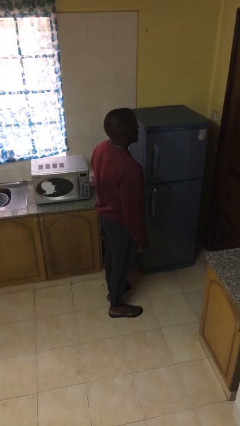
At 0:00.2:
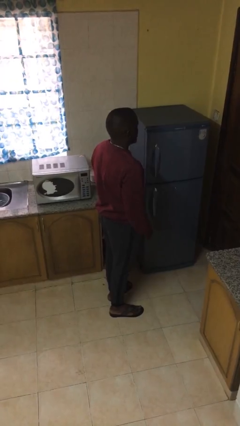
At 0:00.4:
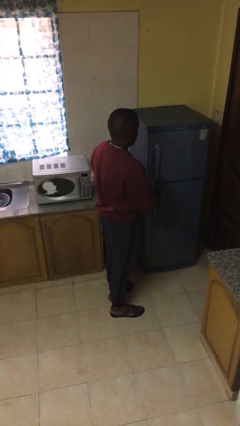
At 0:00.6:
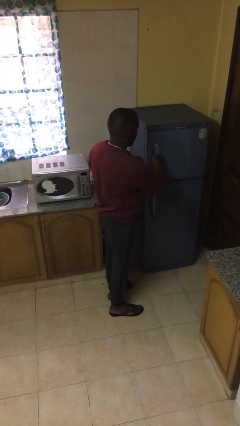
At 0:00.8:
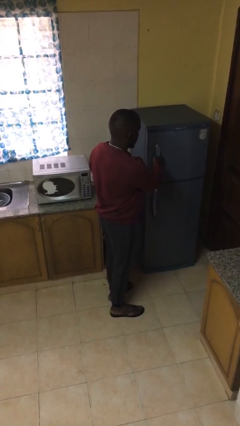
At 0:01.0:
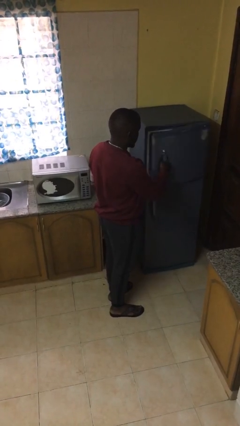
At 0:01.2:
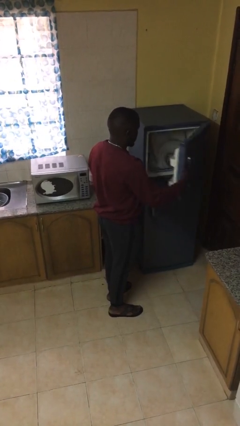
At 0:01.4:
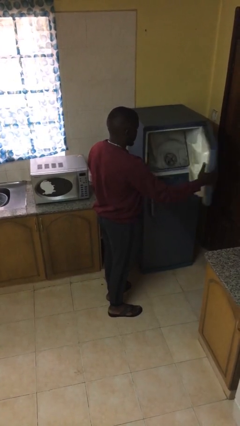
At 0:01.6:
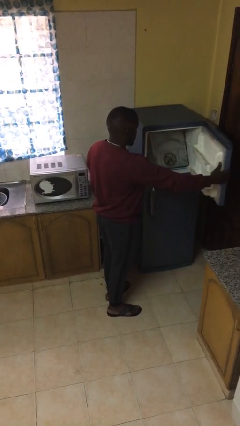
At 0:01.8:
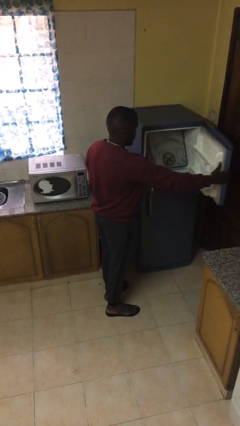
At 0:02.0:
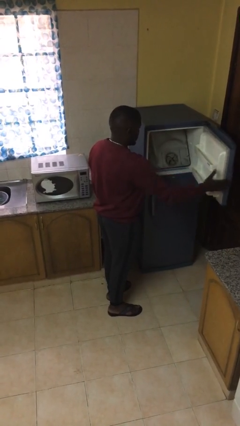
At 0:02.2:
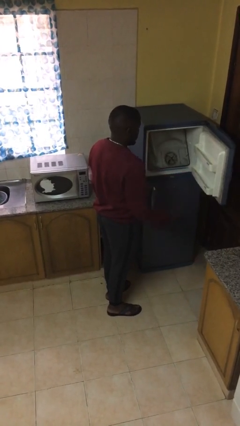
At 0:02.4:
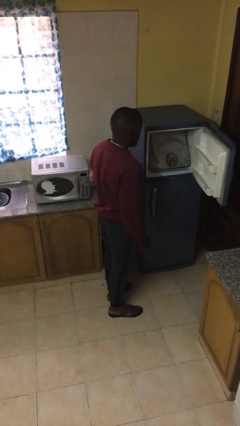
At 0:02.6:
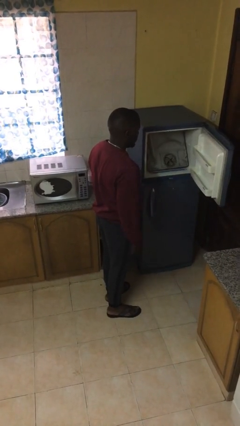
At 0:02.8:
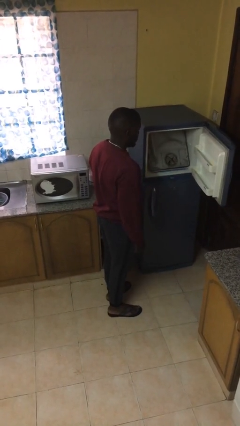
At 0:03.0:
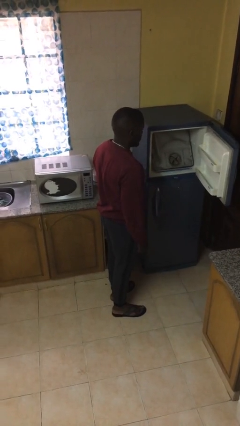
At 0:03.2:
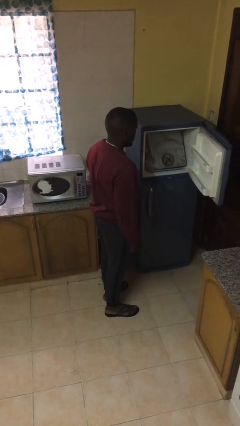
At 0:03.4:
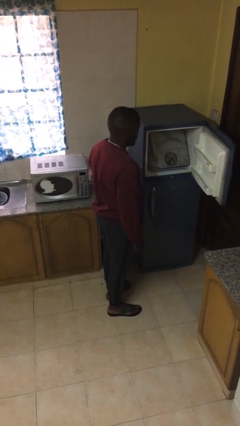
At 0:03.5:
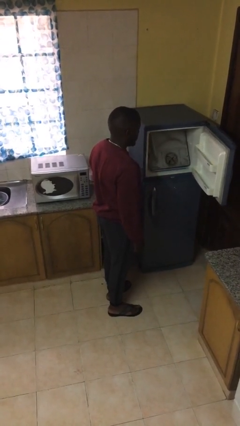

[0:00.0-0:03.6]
person opens refrigerator

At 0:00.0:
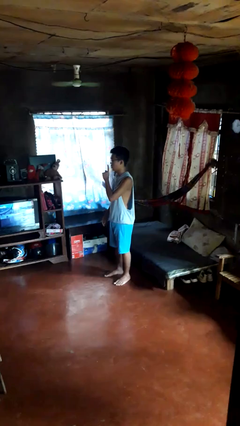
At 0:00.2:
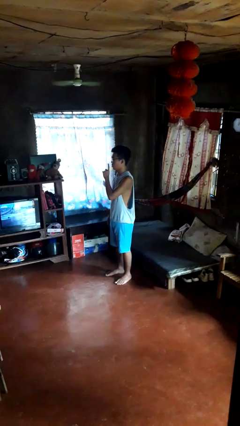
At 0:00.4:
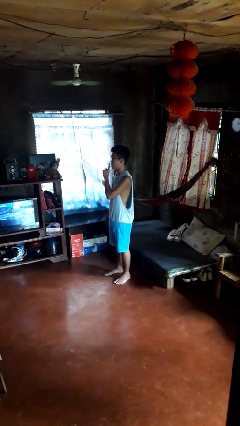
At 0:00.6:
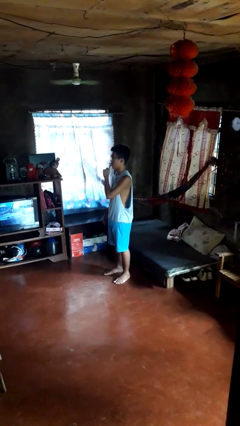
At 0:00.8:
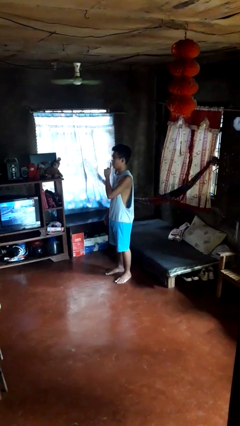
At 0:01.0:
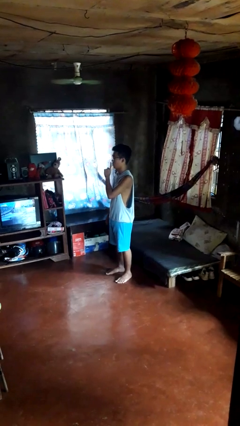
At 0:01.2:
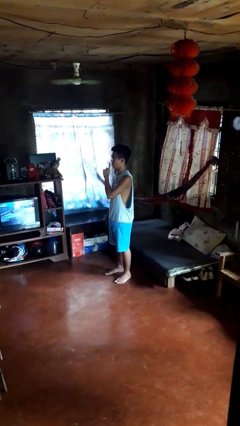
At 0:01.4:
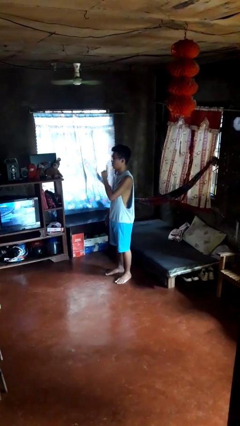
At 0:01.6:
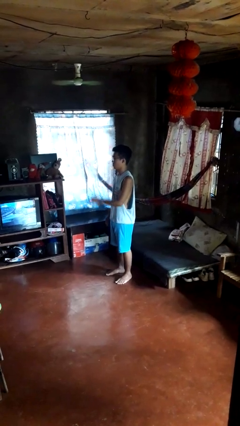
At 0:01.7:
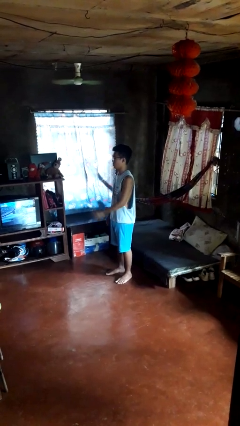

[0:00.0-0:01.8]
person gestures be quiet

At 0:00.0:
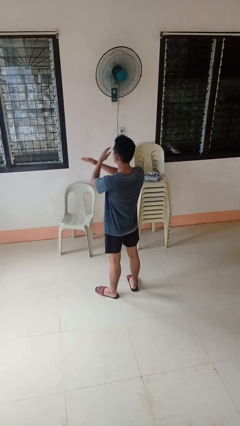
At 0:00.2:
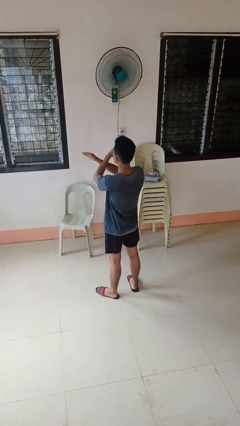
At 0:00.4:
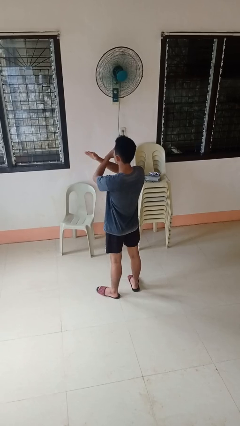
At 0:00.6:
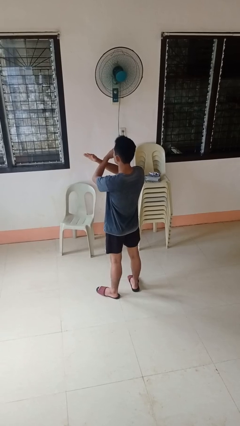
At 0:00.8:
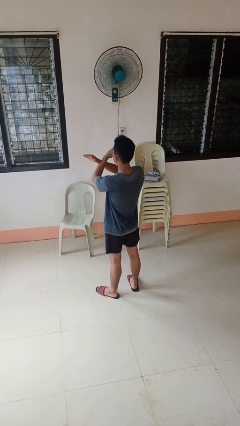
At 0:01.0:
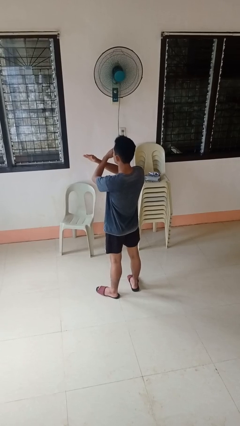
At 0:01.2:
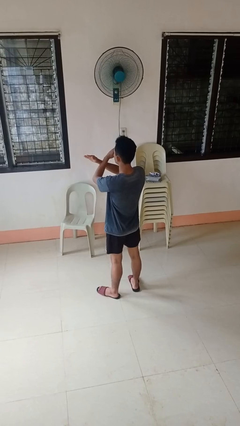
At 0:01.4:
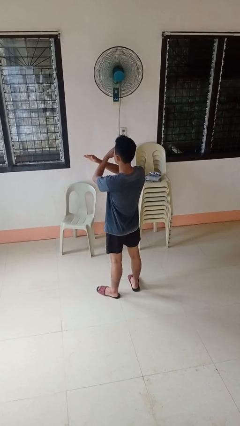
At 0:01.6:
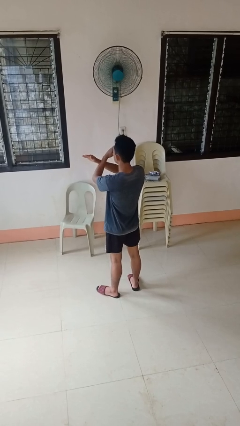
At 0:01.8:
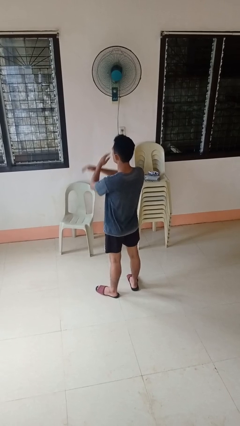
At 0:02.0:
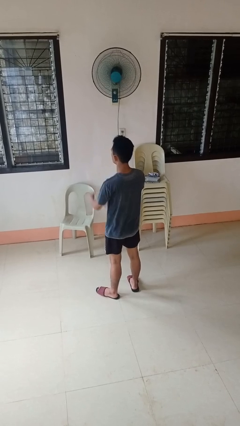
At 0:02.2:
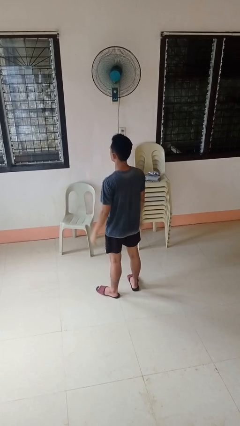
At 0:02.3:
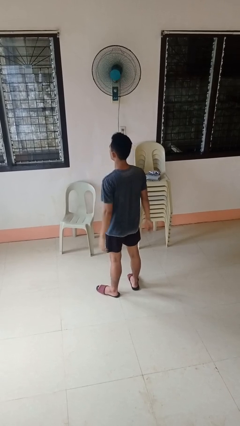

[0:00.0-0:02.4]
person gestures arms x

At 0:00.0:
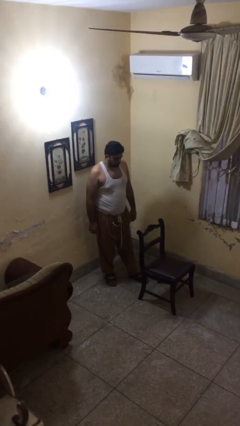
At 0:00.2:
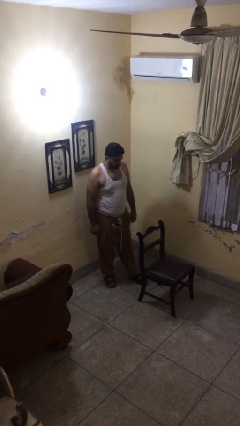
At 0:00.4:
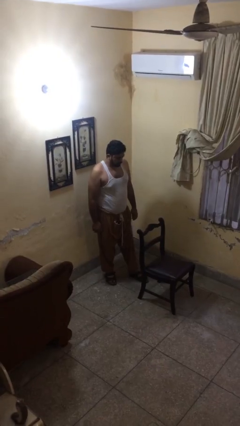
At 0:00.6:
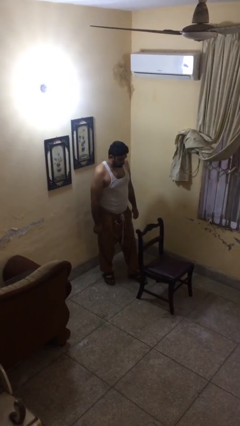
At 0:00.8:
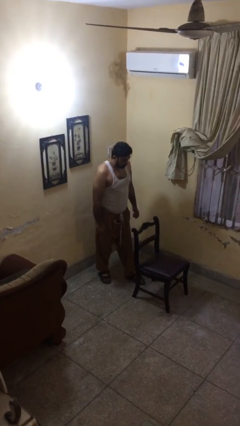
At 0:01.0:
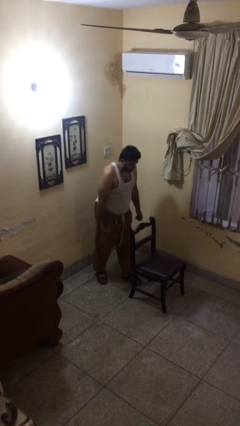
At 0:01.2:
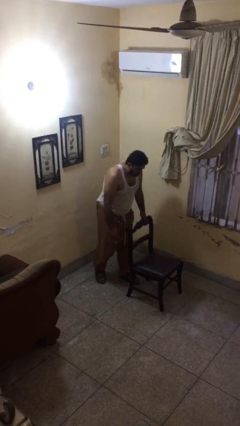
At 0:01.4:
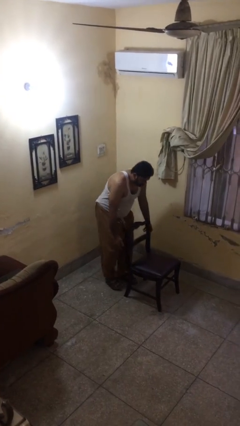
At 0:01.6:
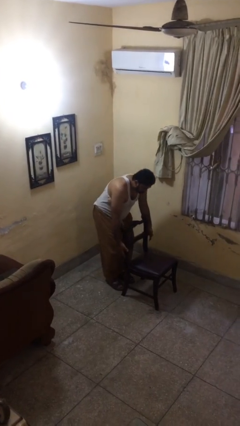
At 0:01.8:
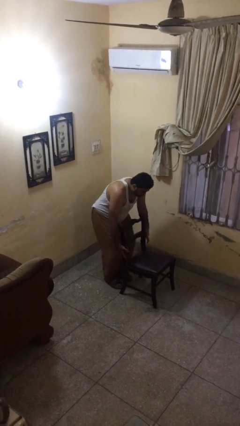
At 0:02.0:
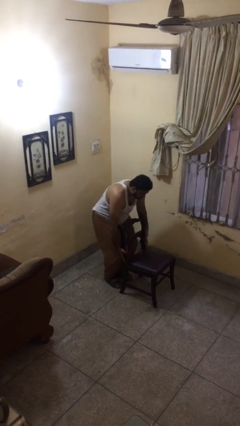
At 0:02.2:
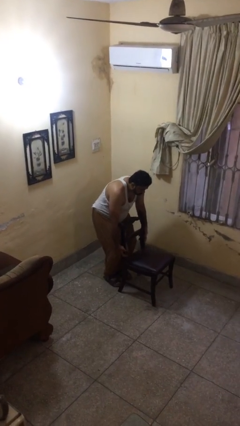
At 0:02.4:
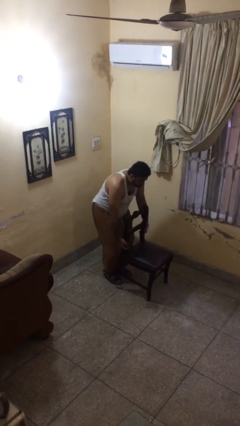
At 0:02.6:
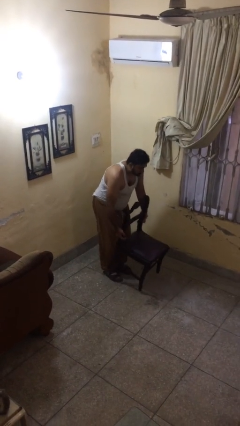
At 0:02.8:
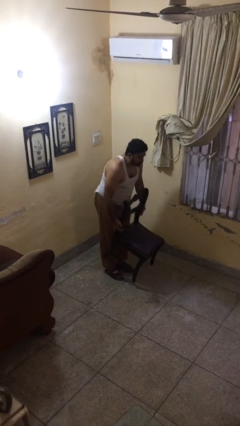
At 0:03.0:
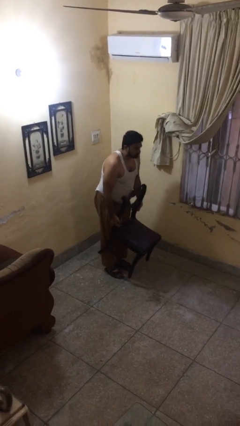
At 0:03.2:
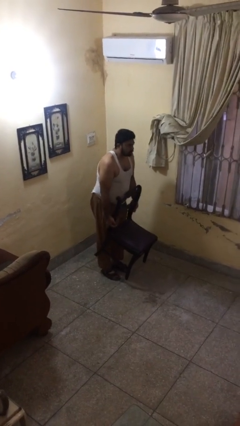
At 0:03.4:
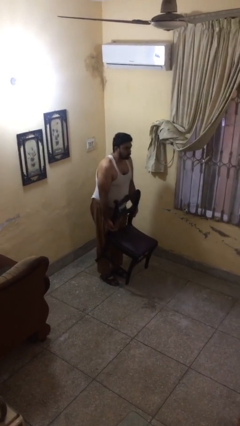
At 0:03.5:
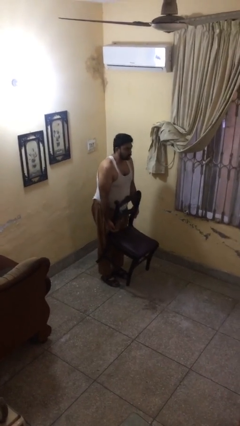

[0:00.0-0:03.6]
person picks up object from floor

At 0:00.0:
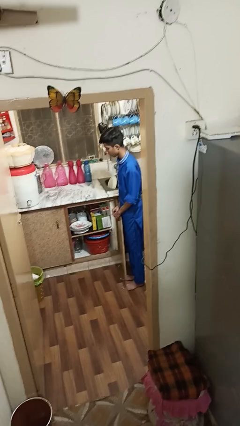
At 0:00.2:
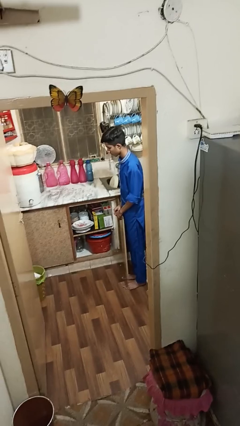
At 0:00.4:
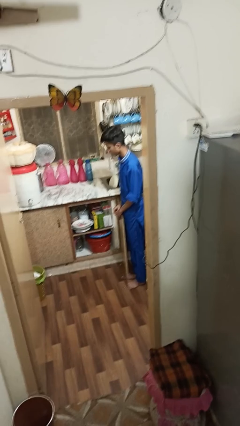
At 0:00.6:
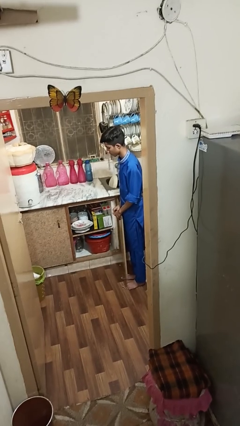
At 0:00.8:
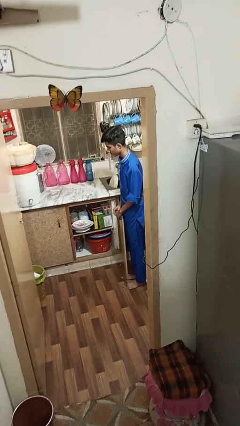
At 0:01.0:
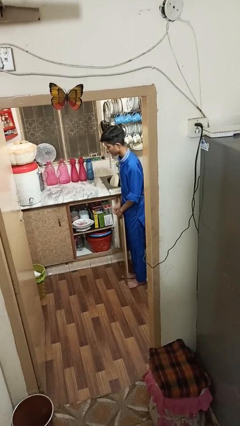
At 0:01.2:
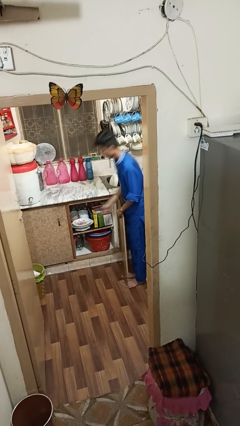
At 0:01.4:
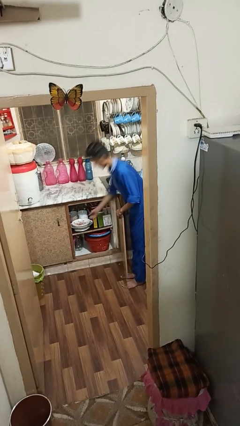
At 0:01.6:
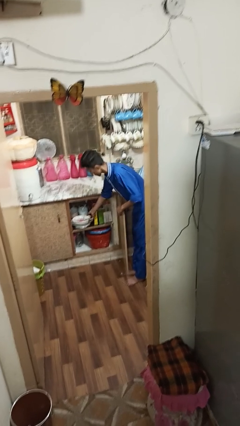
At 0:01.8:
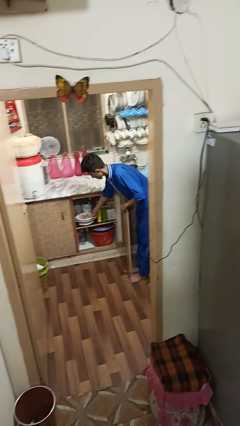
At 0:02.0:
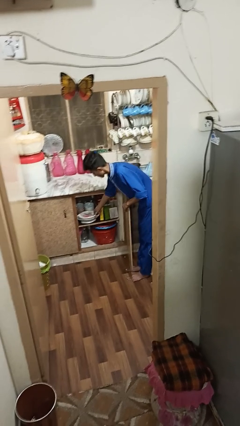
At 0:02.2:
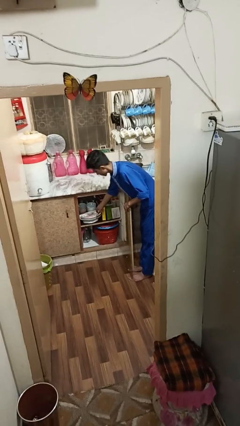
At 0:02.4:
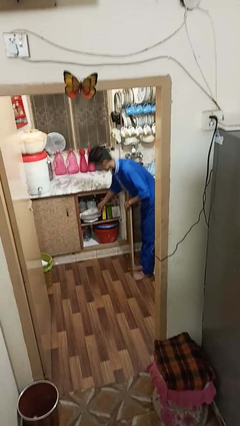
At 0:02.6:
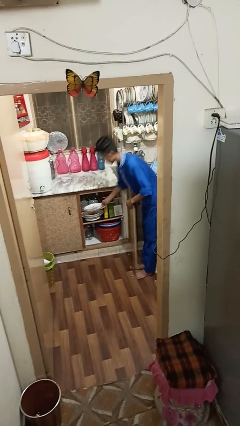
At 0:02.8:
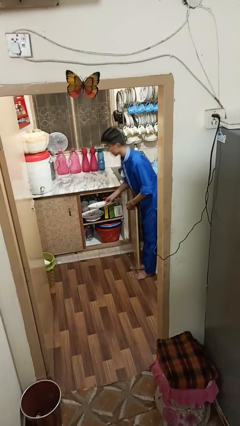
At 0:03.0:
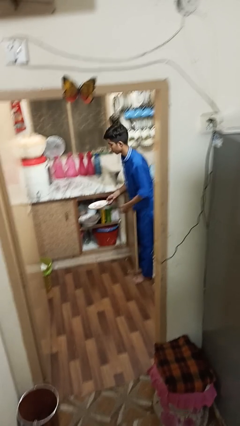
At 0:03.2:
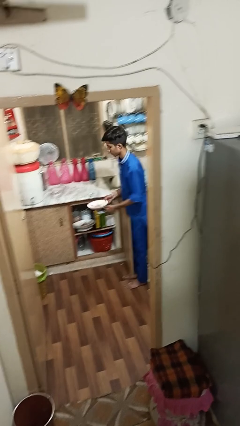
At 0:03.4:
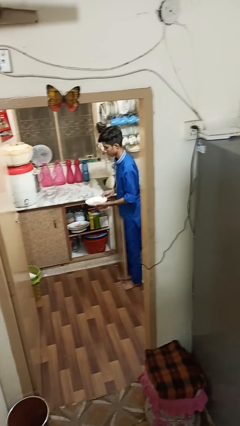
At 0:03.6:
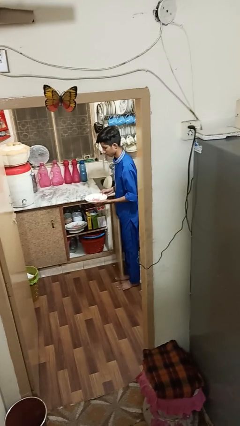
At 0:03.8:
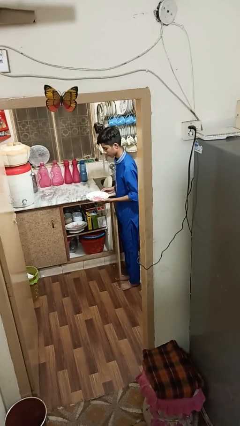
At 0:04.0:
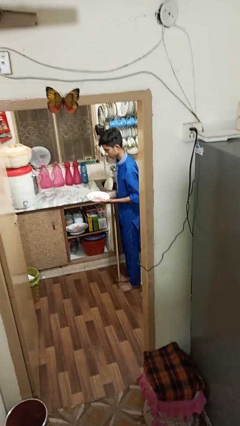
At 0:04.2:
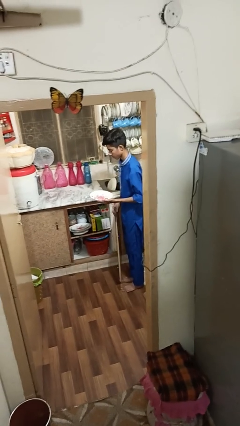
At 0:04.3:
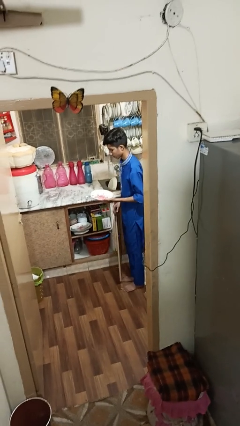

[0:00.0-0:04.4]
person takes object from cabinet

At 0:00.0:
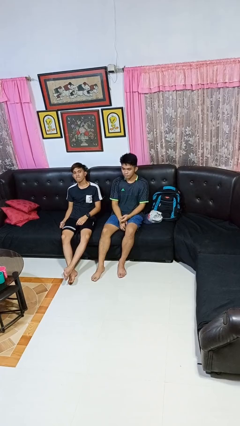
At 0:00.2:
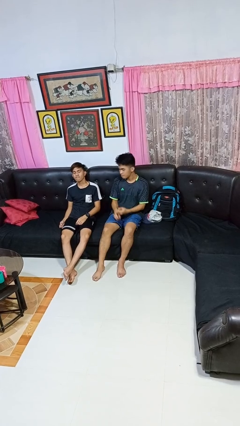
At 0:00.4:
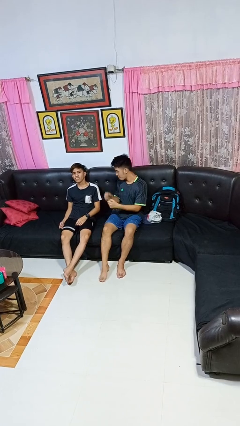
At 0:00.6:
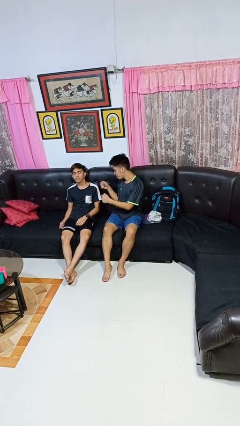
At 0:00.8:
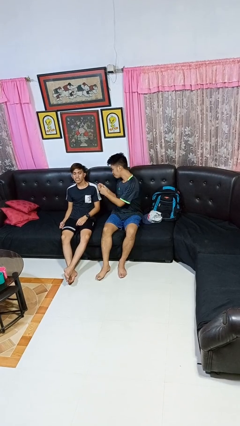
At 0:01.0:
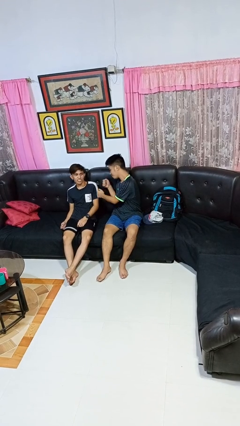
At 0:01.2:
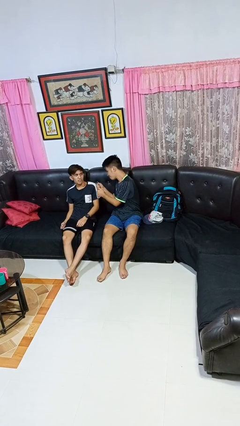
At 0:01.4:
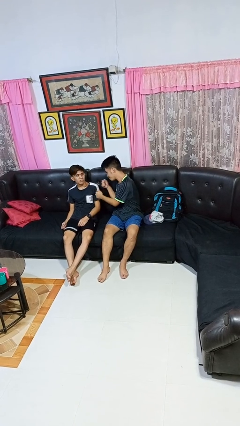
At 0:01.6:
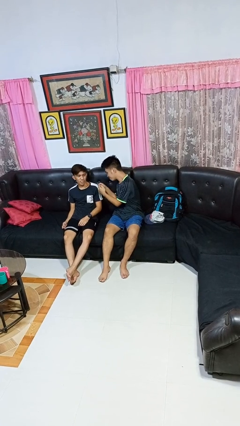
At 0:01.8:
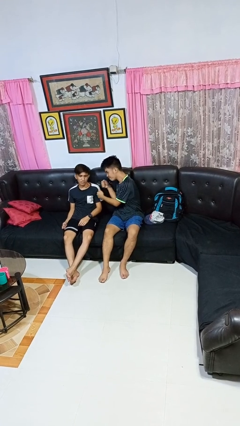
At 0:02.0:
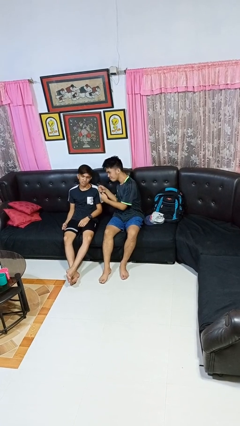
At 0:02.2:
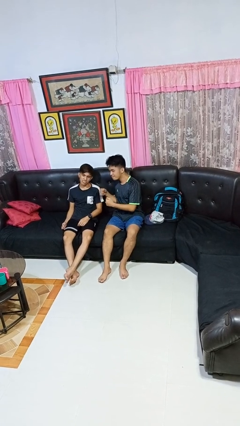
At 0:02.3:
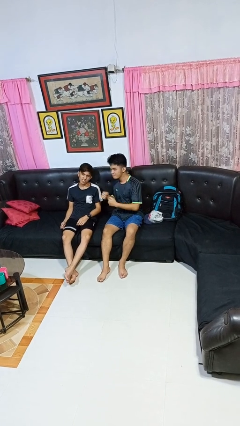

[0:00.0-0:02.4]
person pounds shoulders of person
